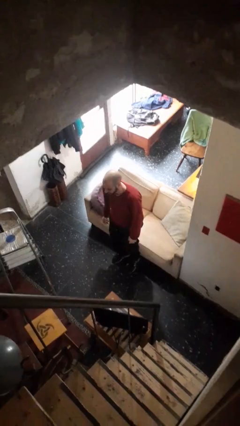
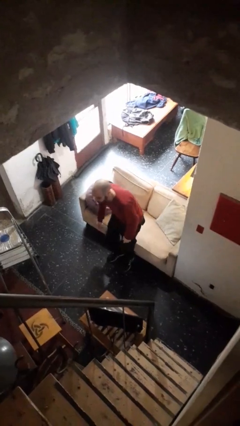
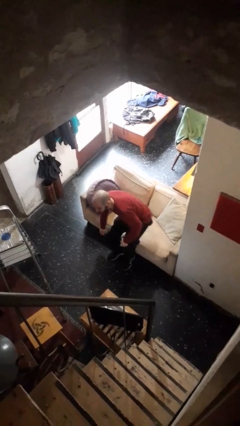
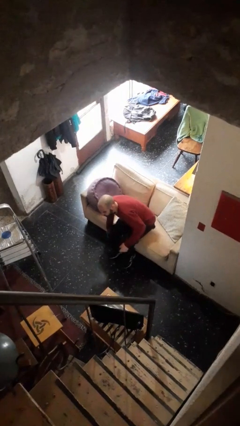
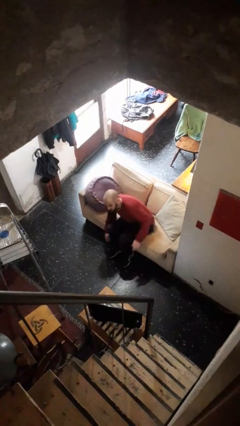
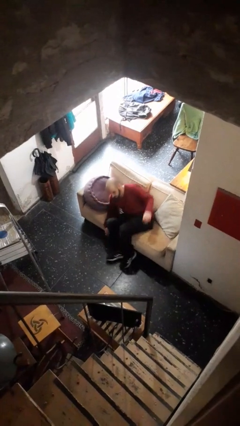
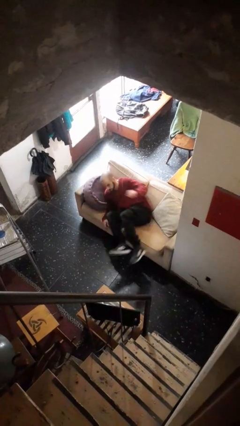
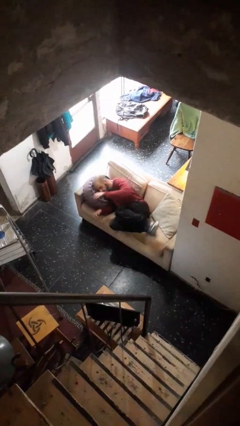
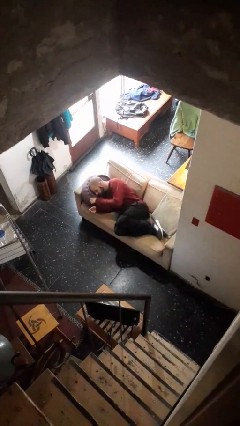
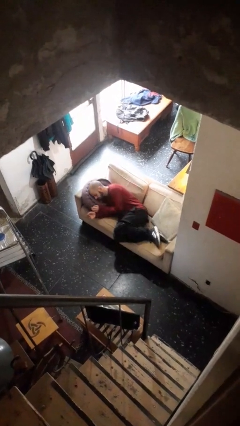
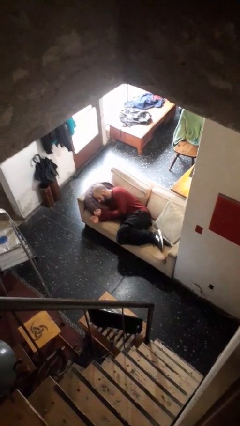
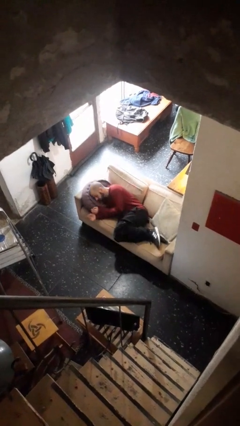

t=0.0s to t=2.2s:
person lies down on couch

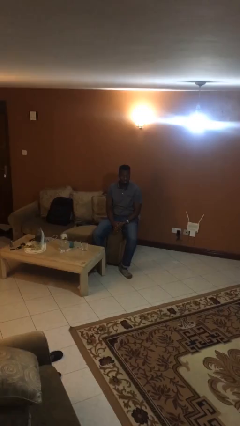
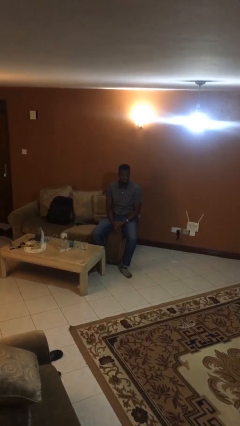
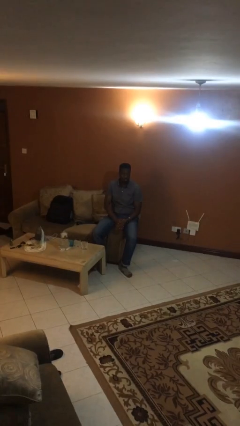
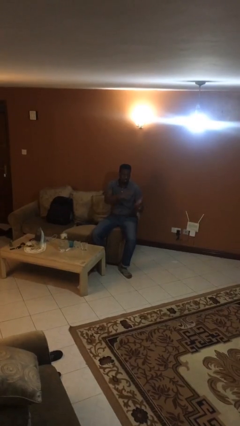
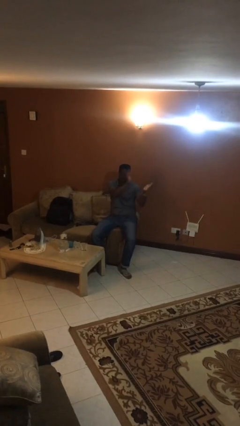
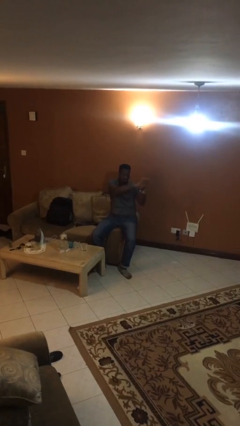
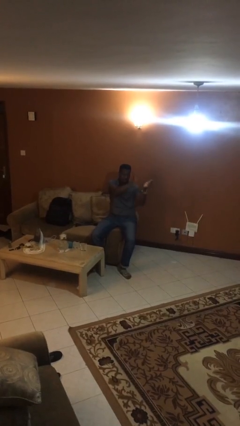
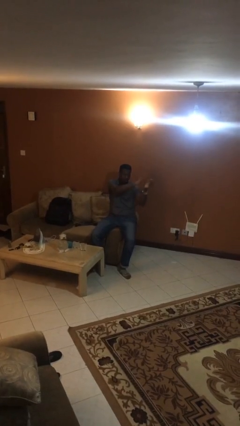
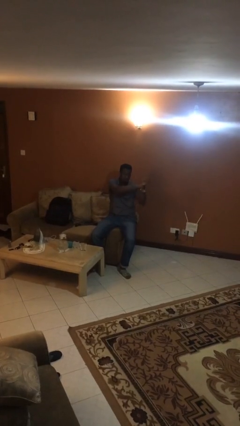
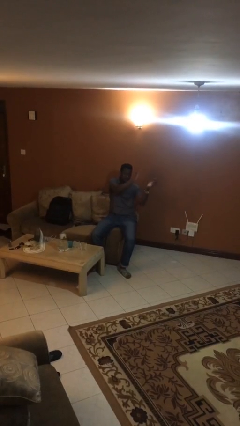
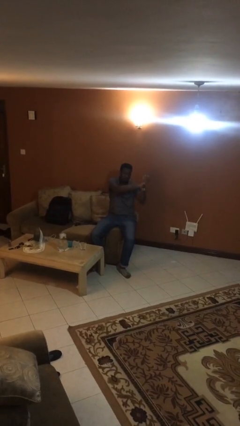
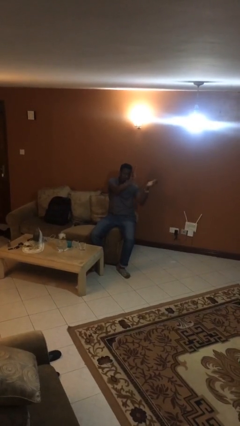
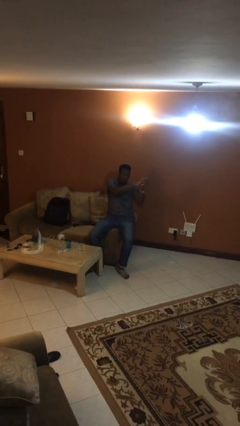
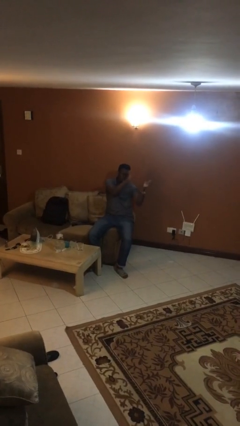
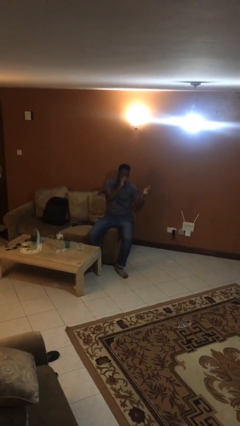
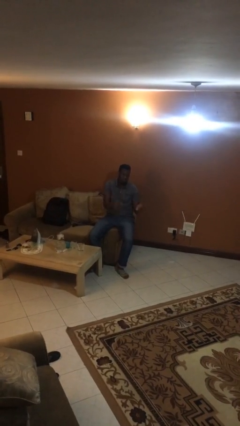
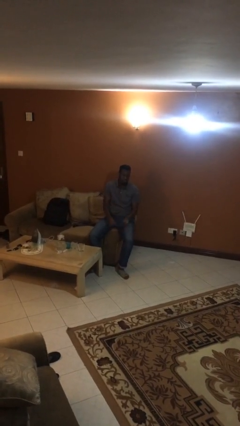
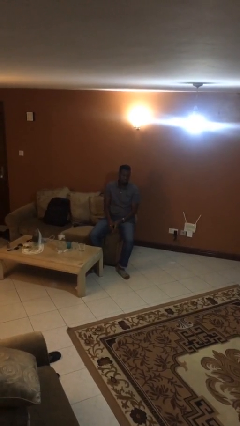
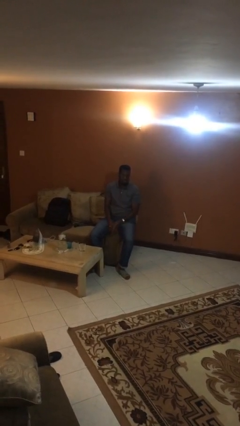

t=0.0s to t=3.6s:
person claps hands

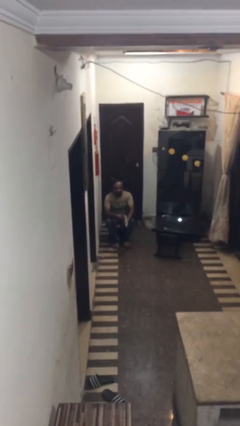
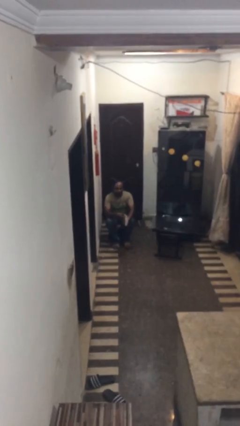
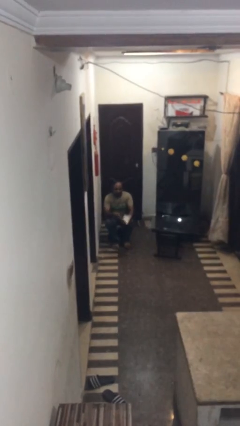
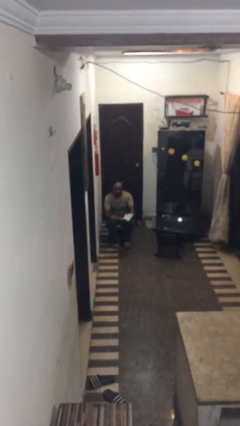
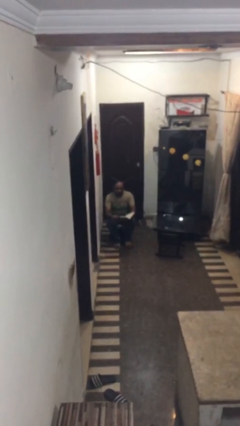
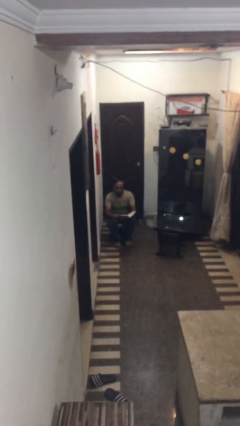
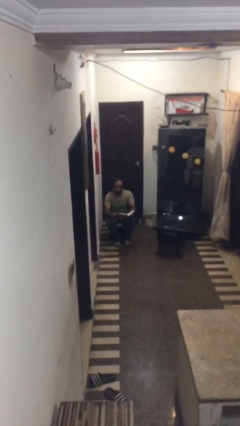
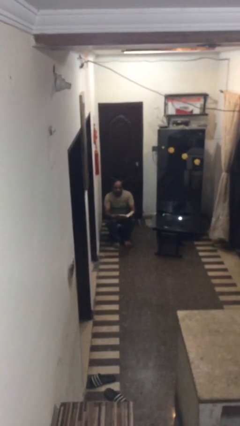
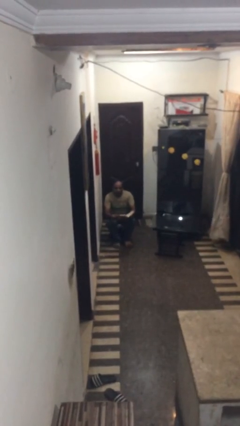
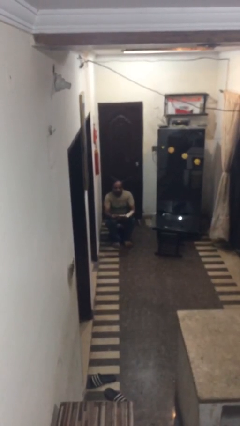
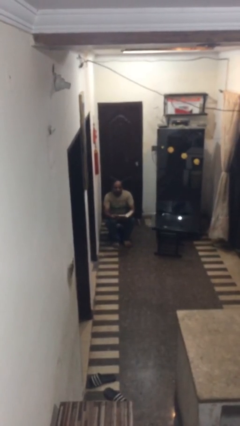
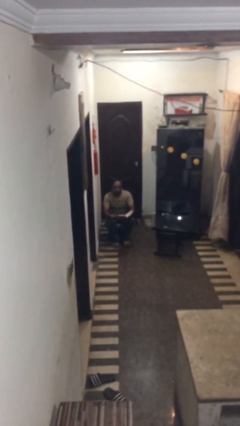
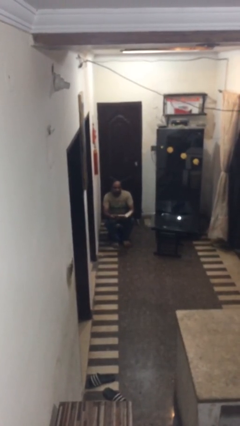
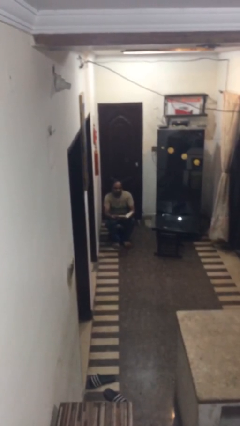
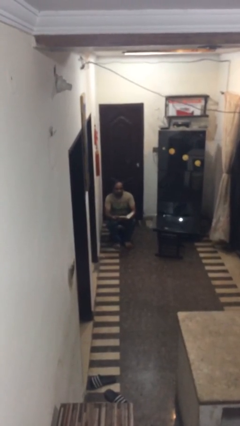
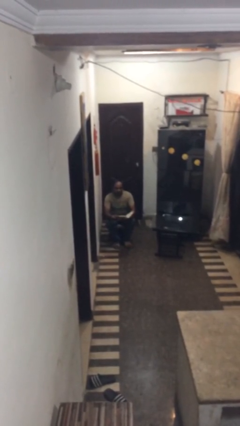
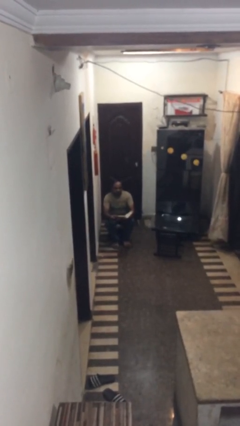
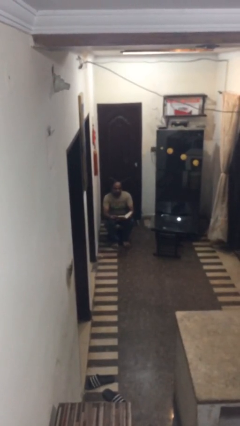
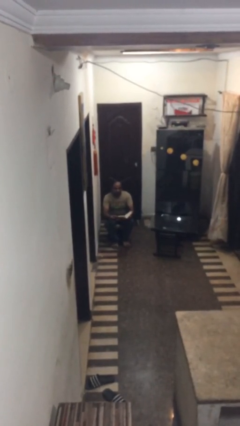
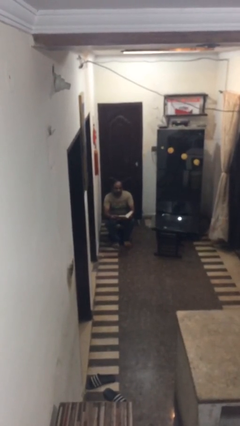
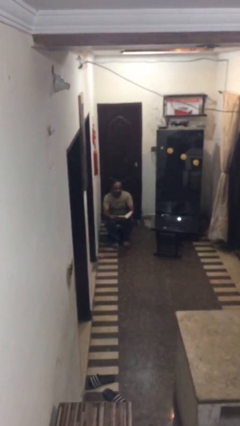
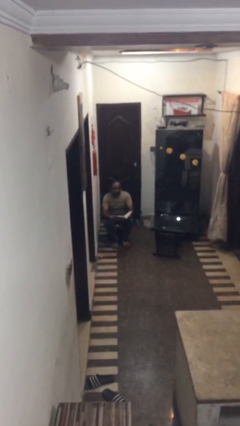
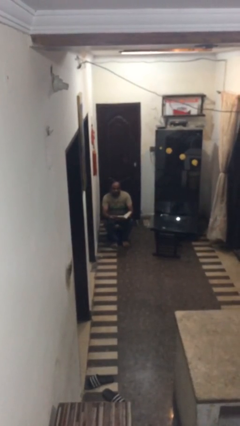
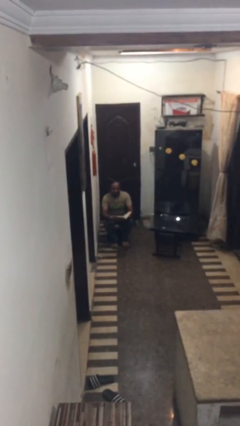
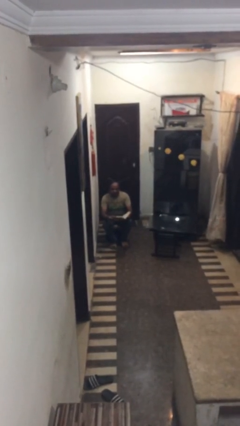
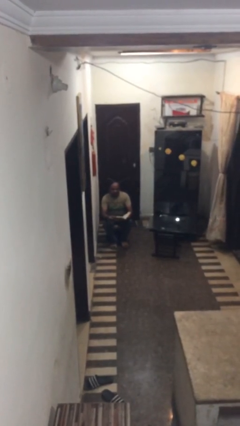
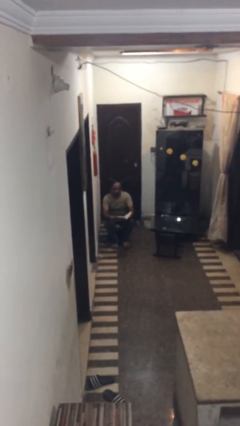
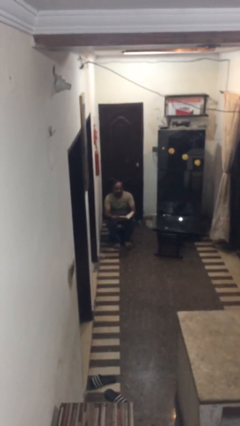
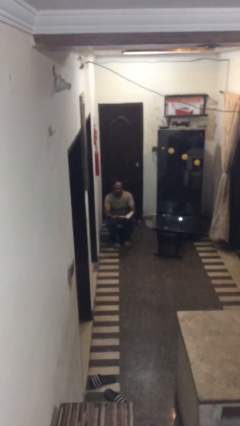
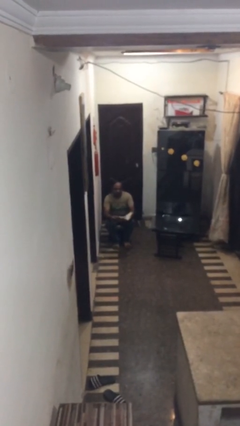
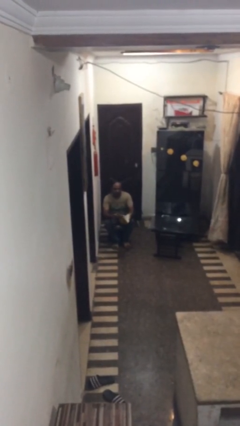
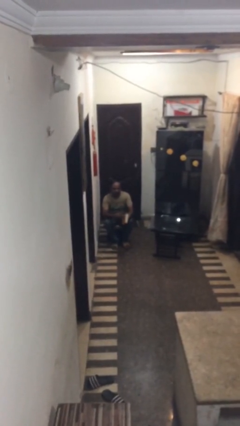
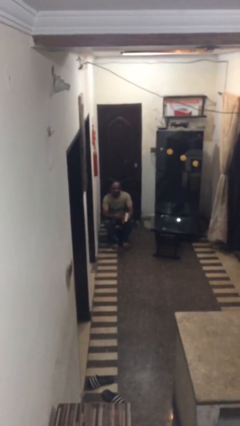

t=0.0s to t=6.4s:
person reads document

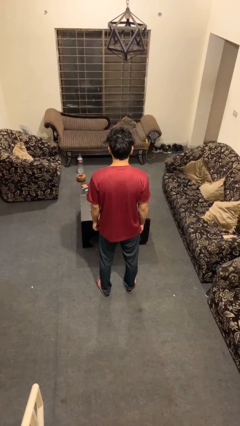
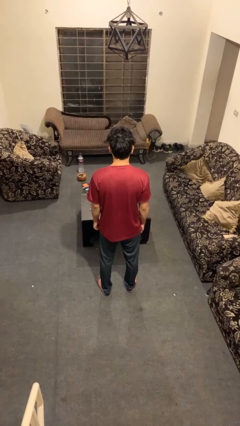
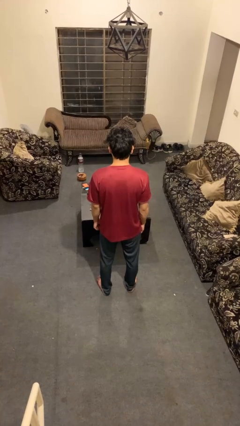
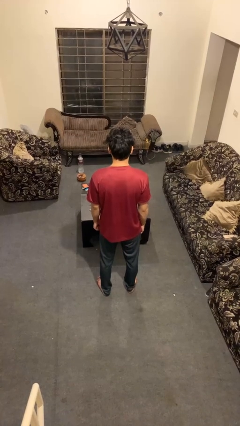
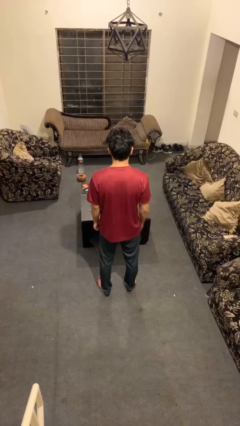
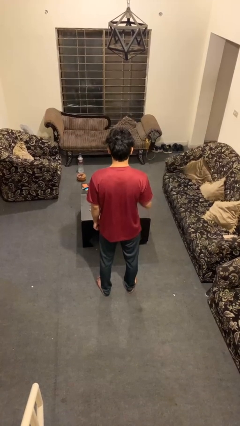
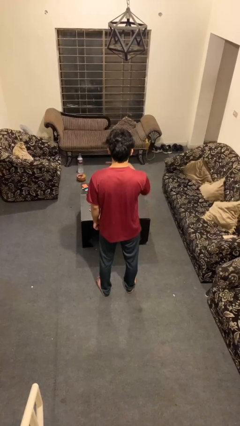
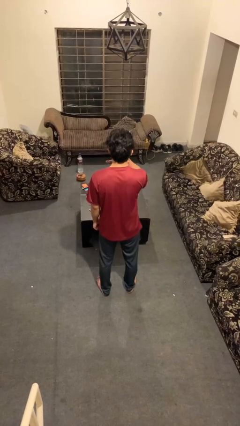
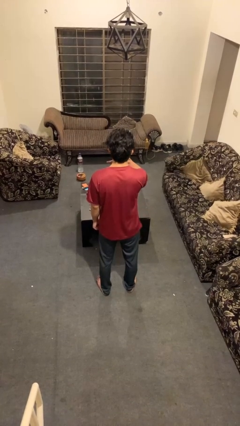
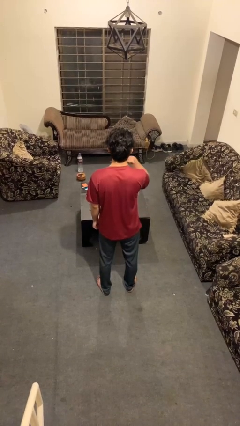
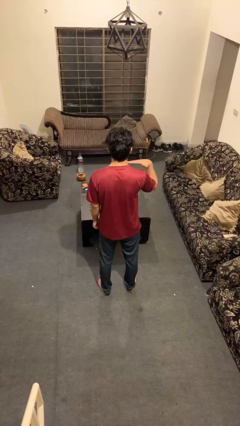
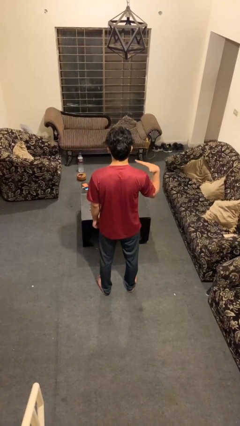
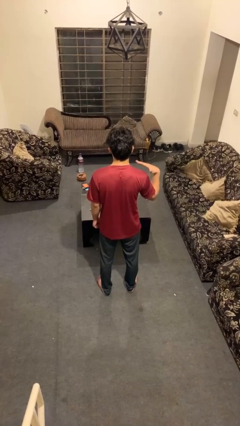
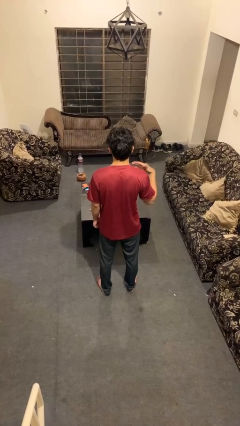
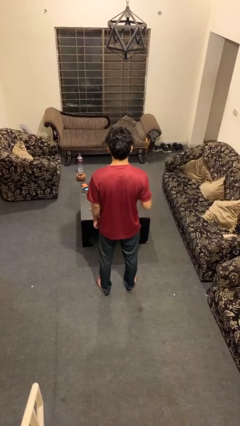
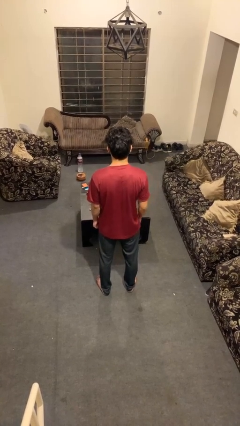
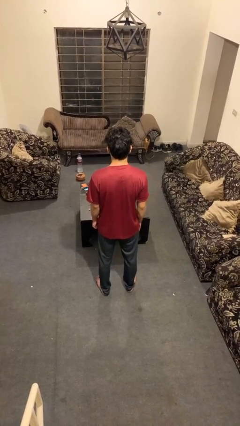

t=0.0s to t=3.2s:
person gestures cut

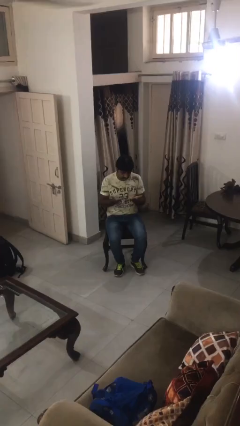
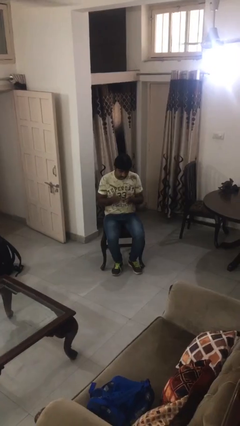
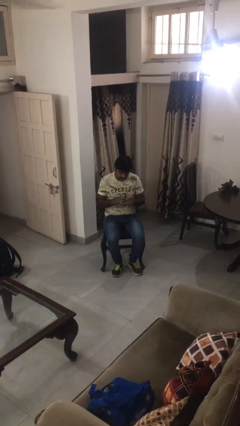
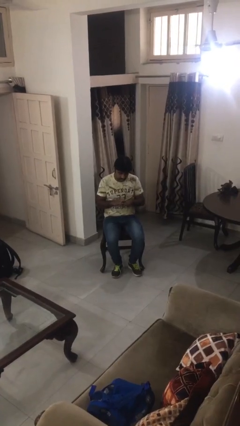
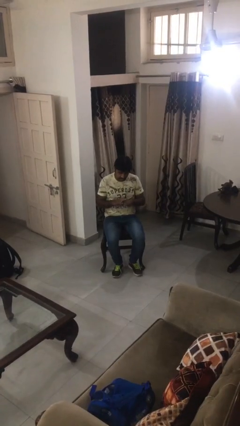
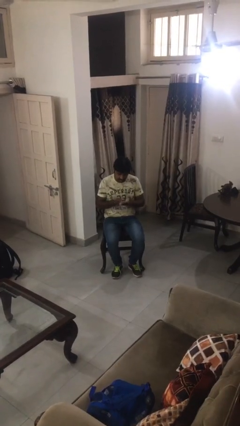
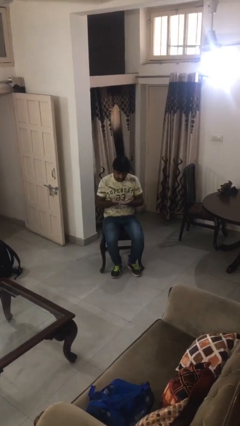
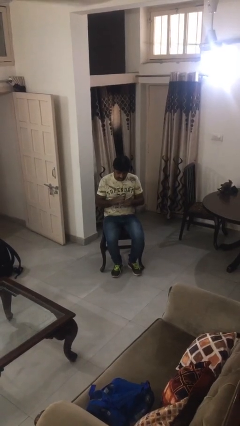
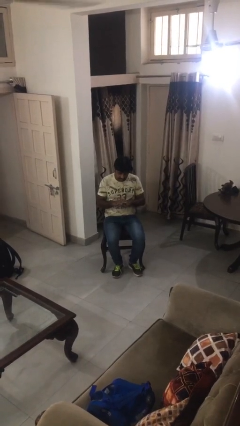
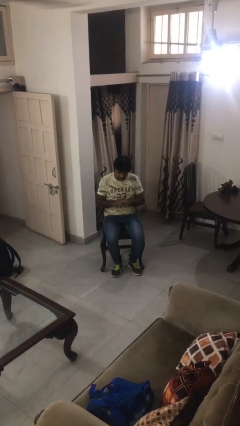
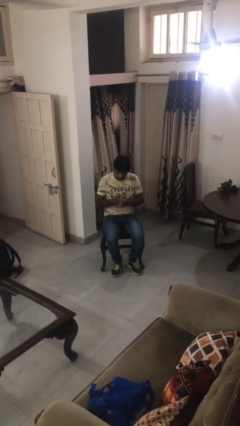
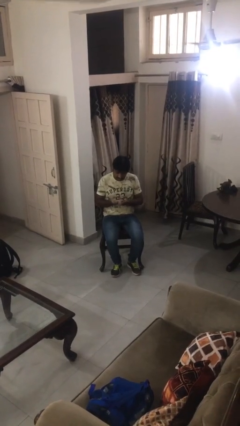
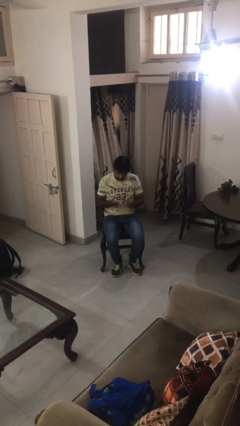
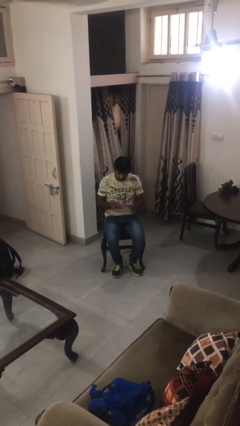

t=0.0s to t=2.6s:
person looks at hands in lap
